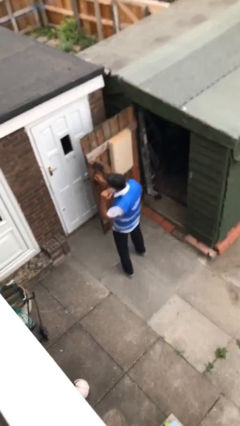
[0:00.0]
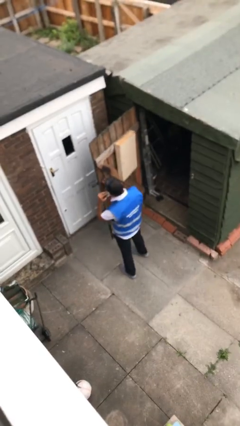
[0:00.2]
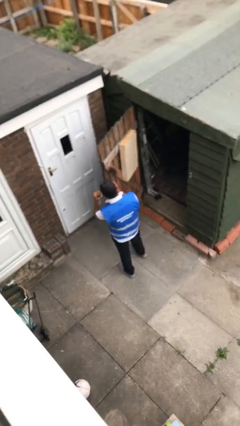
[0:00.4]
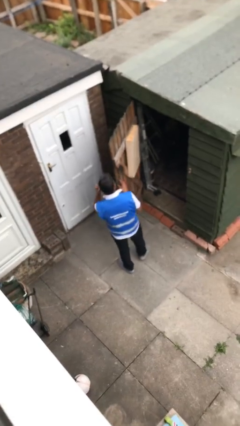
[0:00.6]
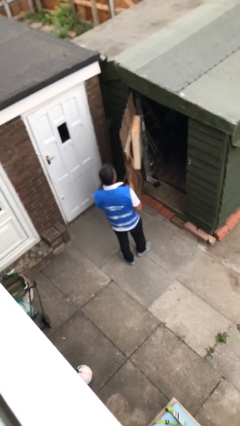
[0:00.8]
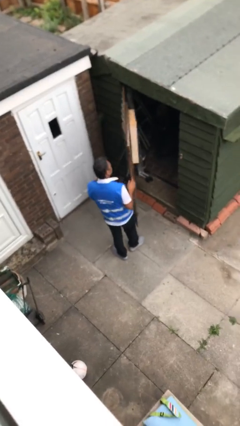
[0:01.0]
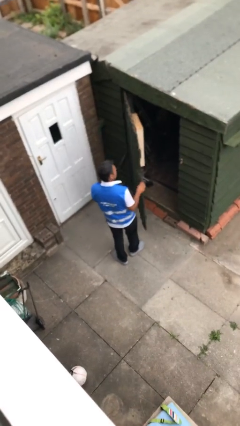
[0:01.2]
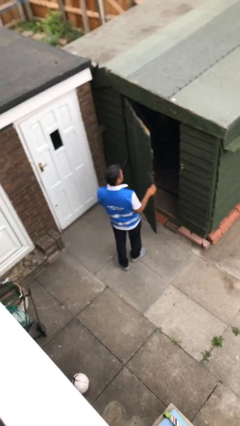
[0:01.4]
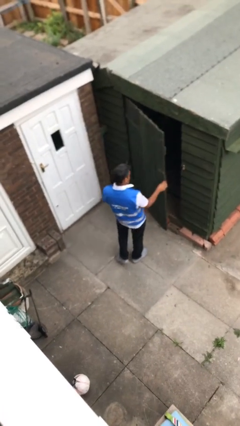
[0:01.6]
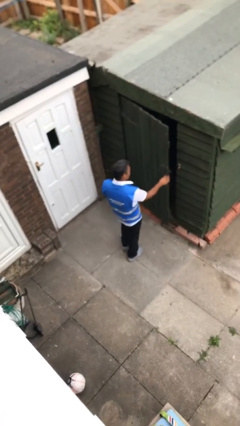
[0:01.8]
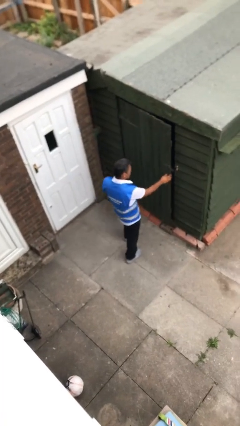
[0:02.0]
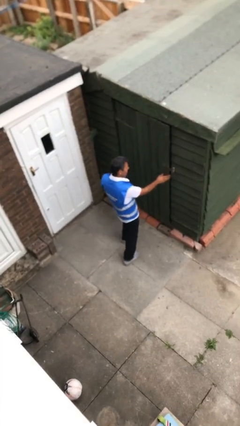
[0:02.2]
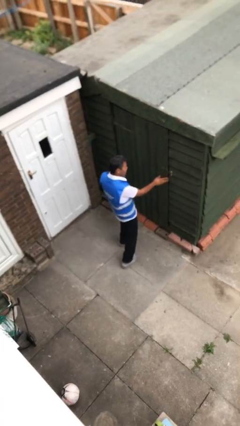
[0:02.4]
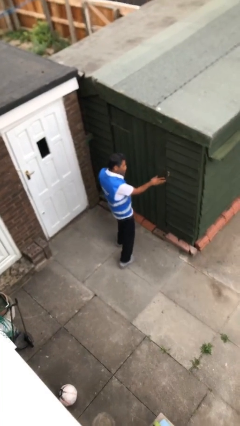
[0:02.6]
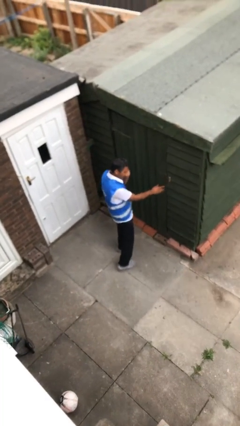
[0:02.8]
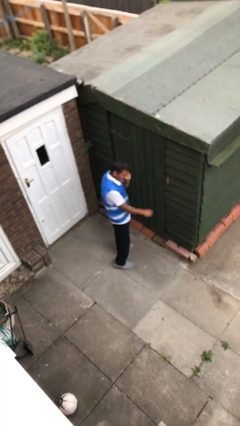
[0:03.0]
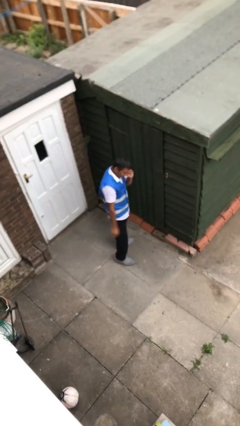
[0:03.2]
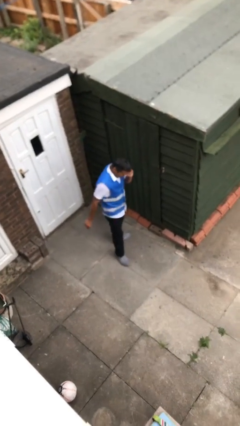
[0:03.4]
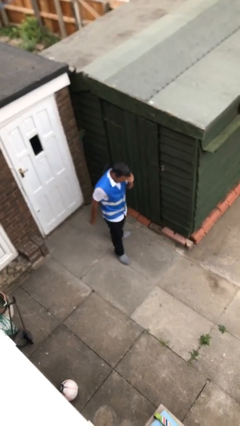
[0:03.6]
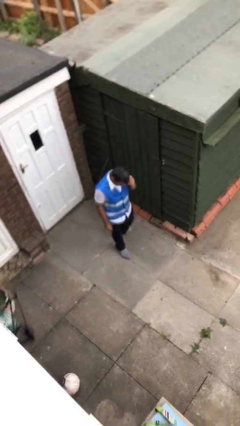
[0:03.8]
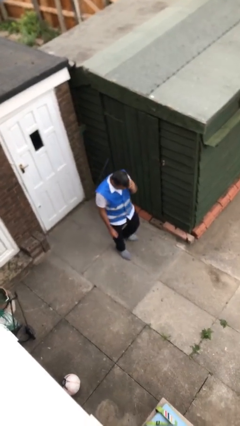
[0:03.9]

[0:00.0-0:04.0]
person closes facility door

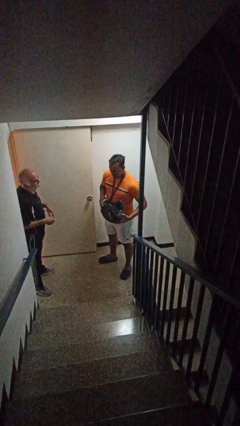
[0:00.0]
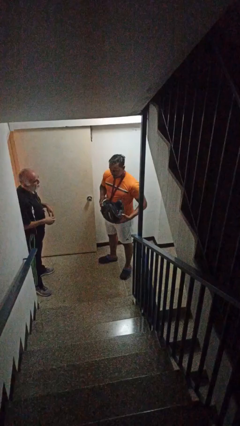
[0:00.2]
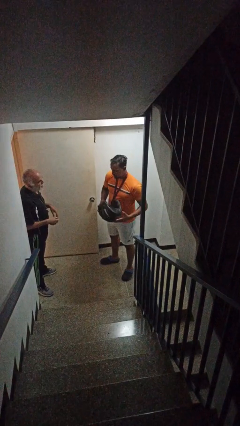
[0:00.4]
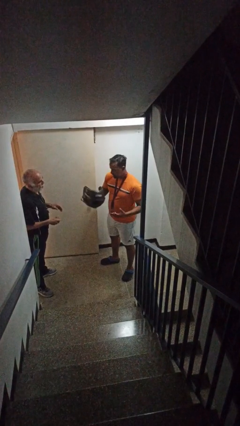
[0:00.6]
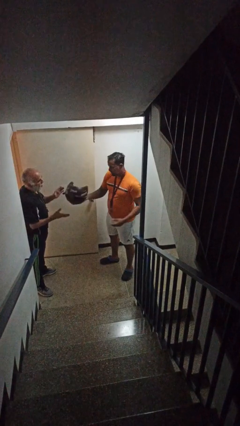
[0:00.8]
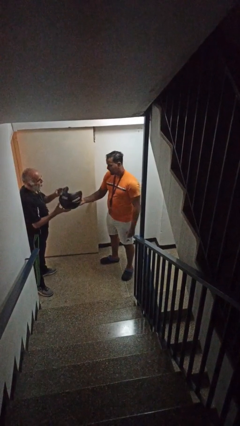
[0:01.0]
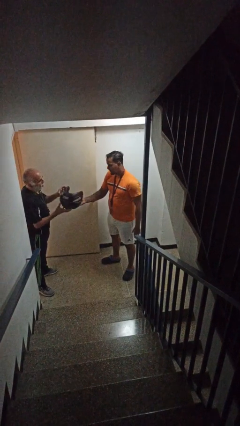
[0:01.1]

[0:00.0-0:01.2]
person transfers object to person

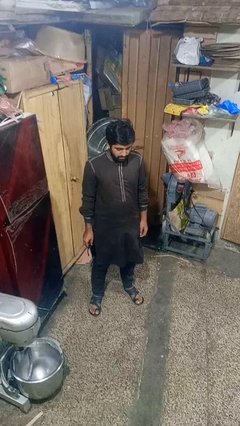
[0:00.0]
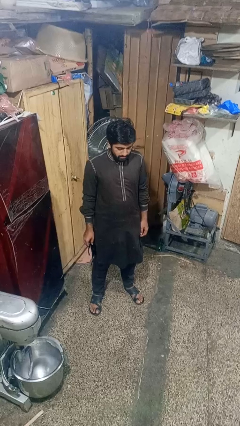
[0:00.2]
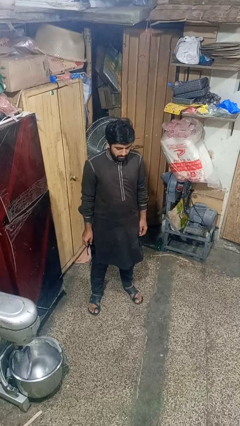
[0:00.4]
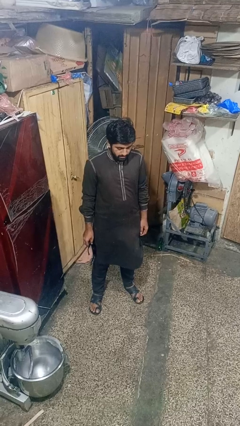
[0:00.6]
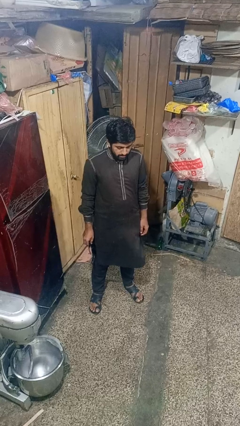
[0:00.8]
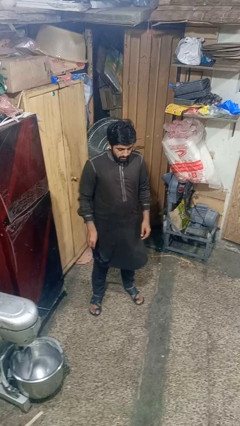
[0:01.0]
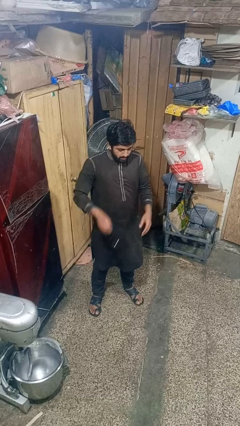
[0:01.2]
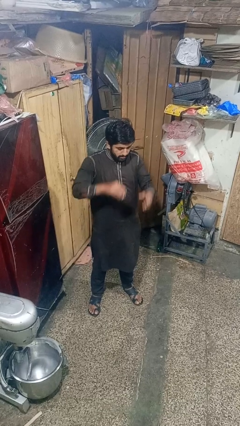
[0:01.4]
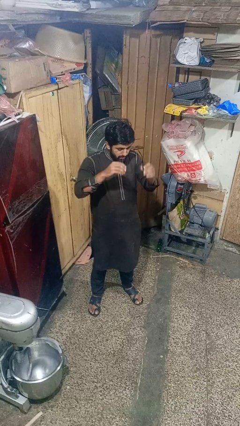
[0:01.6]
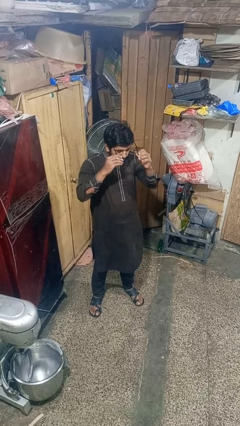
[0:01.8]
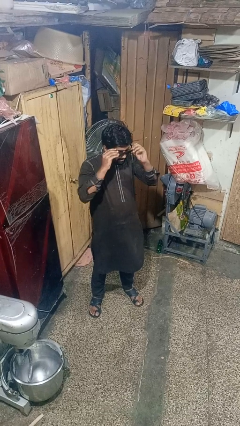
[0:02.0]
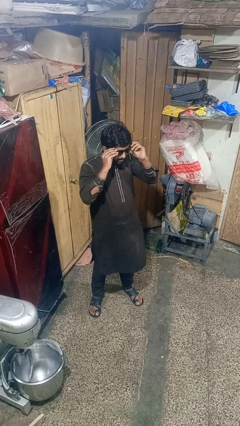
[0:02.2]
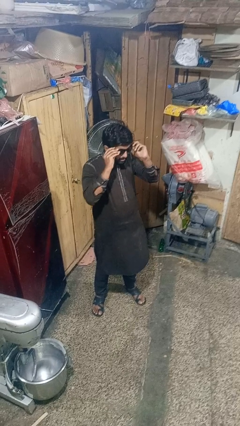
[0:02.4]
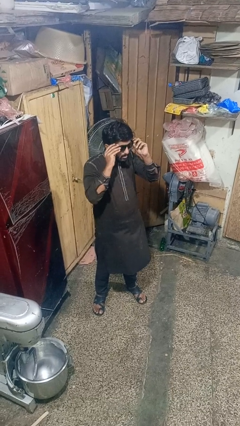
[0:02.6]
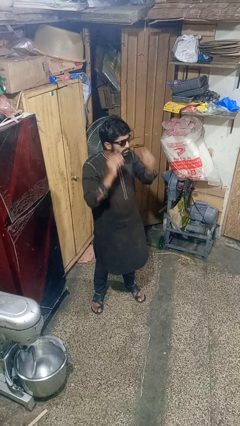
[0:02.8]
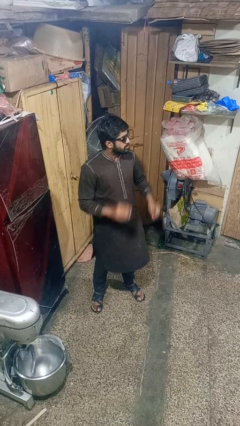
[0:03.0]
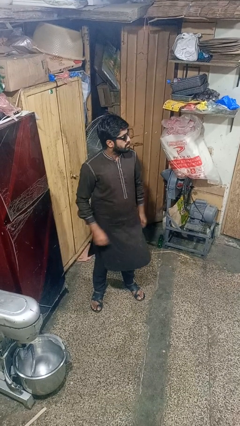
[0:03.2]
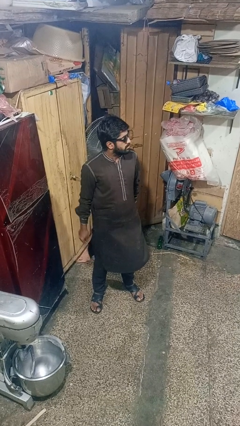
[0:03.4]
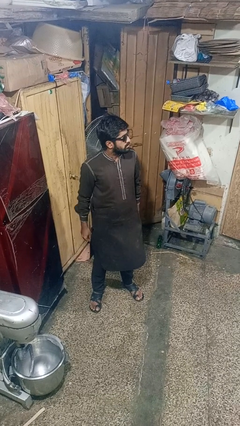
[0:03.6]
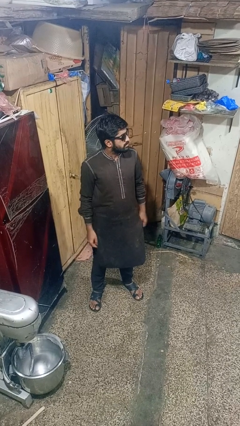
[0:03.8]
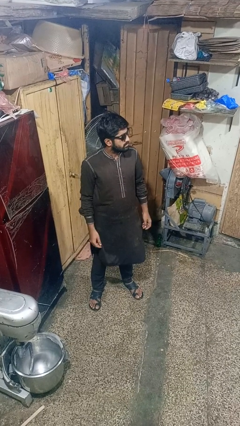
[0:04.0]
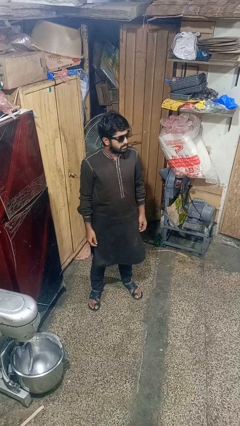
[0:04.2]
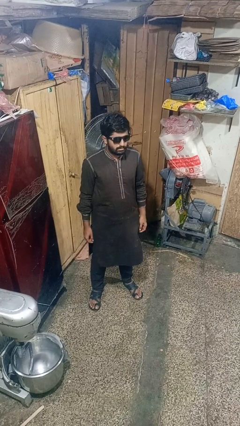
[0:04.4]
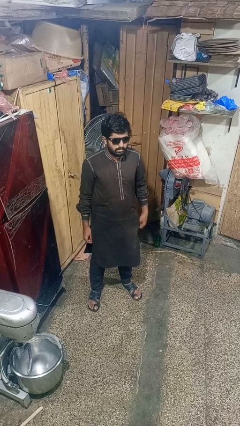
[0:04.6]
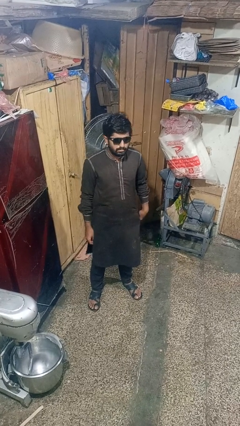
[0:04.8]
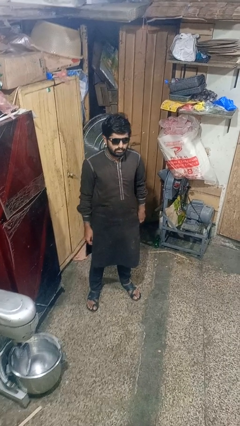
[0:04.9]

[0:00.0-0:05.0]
person puts on sunglasses

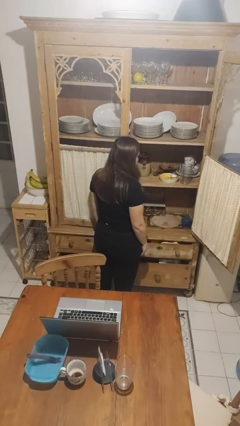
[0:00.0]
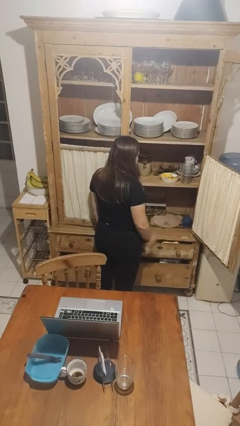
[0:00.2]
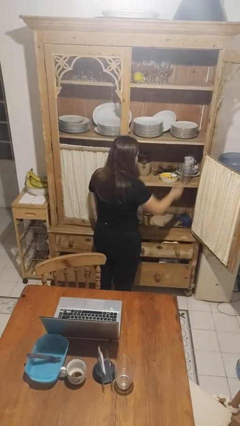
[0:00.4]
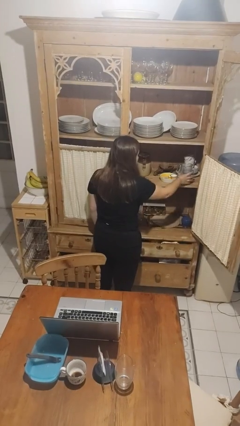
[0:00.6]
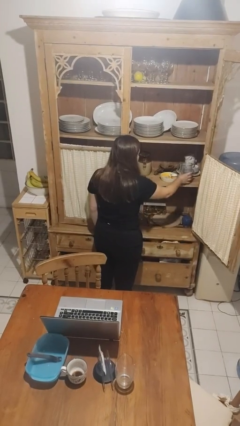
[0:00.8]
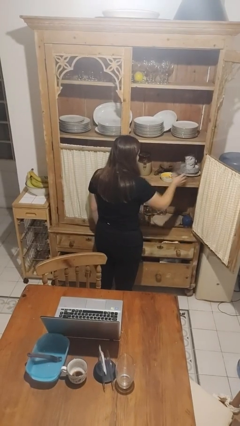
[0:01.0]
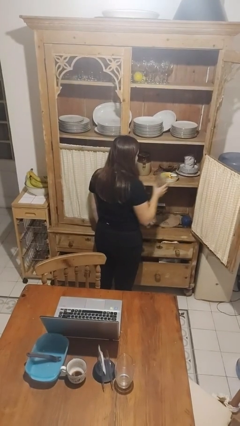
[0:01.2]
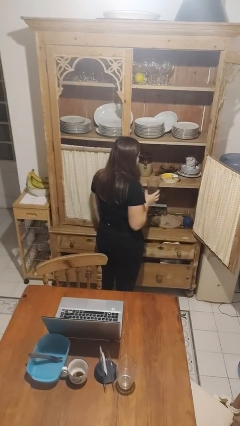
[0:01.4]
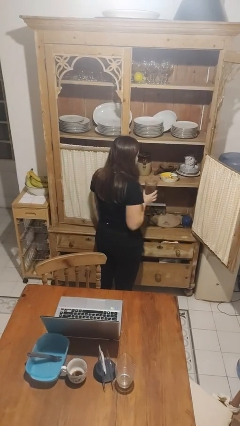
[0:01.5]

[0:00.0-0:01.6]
person takes object from cabinet

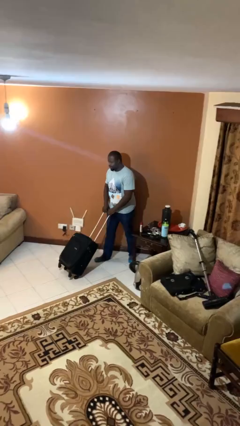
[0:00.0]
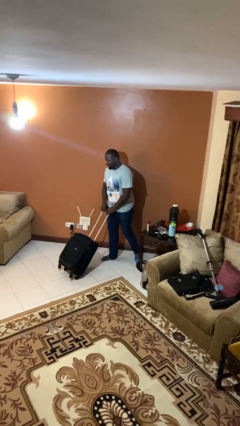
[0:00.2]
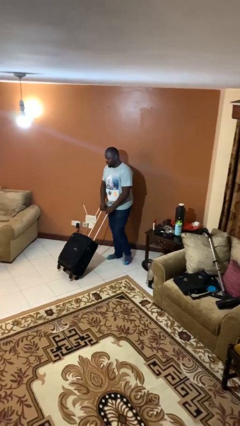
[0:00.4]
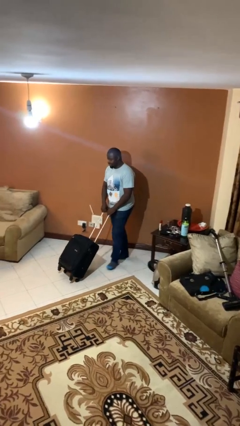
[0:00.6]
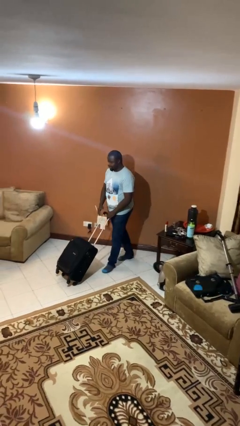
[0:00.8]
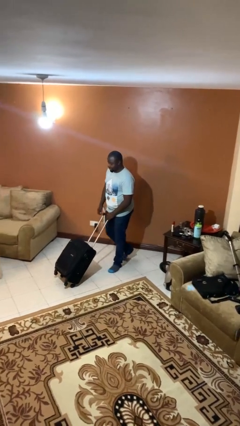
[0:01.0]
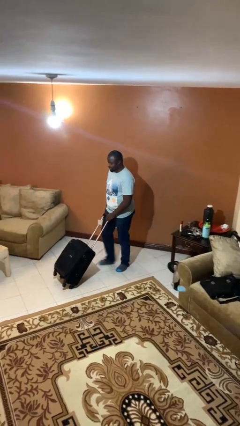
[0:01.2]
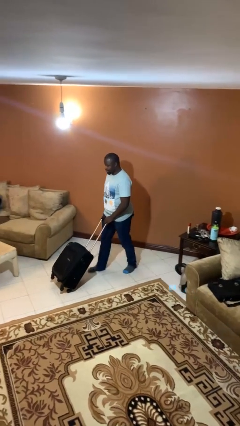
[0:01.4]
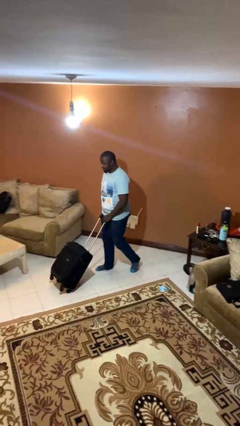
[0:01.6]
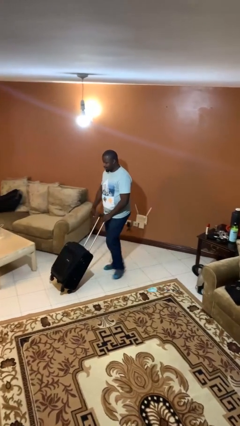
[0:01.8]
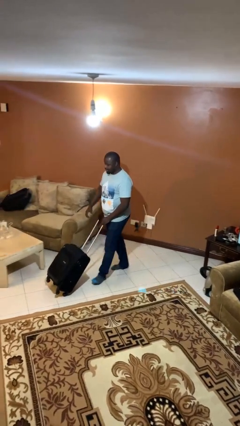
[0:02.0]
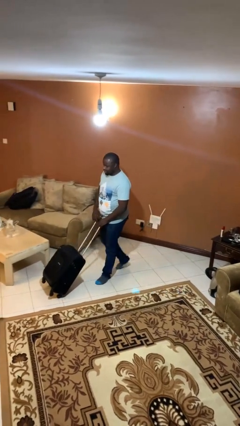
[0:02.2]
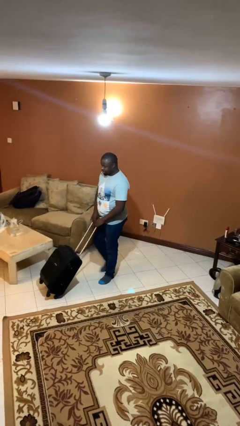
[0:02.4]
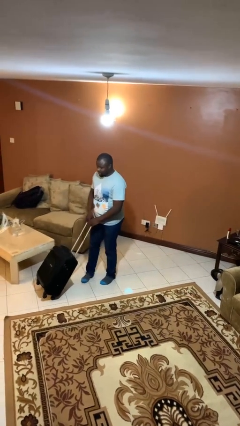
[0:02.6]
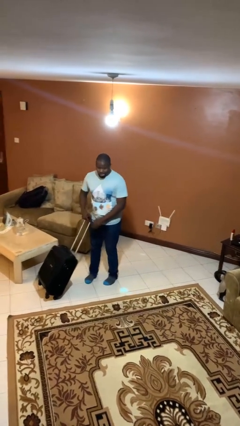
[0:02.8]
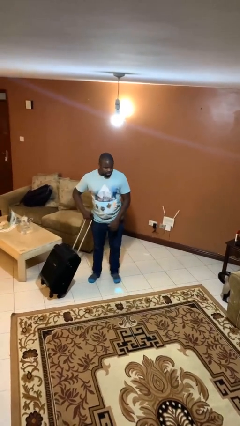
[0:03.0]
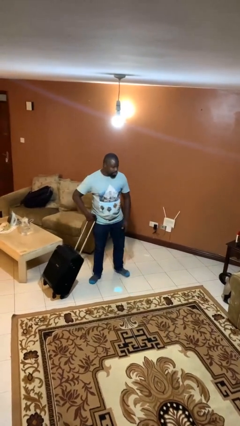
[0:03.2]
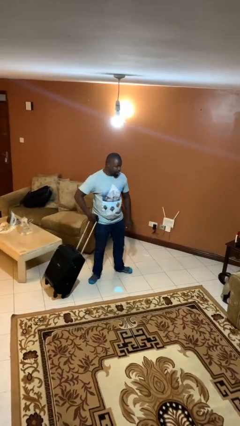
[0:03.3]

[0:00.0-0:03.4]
person pulls wheeled cart

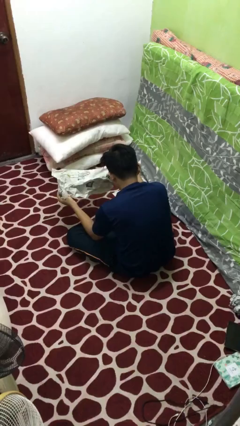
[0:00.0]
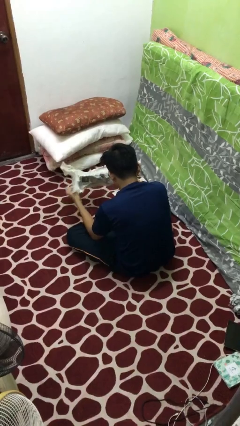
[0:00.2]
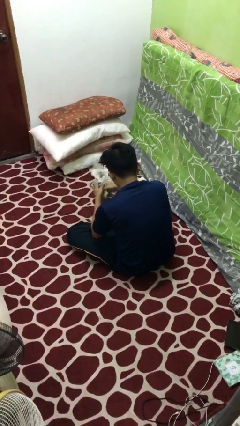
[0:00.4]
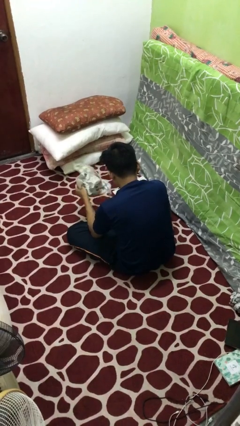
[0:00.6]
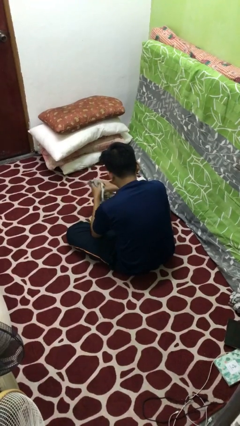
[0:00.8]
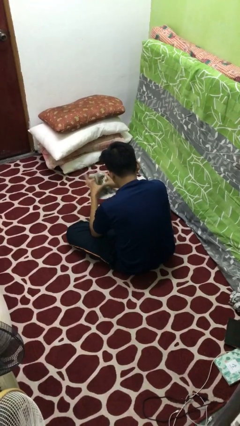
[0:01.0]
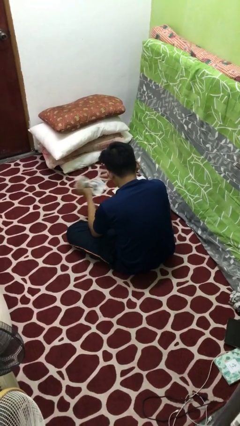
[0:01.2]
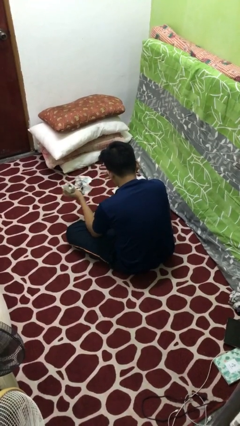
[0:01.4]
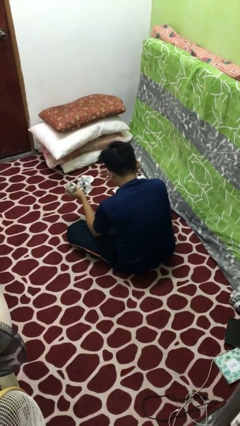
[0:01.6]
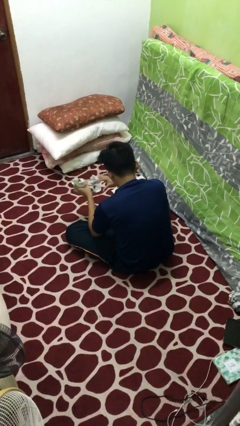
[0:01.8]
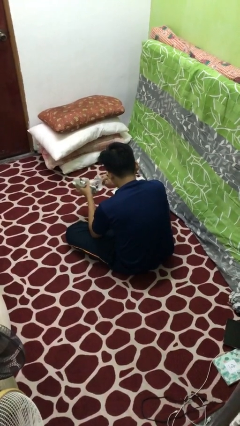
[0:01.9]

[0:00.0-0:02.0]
person crumples paper

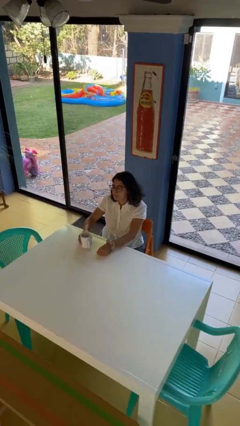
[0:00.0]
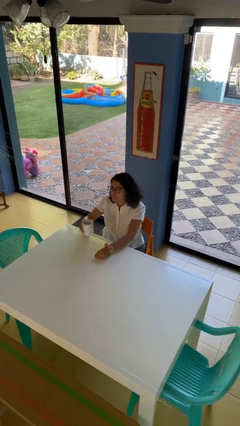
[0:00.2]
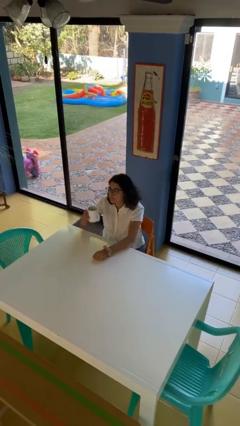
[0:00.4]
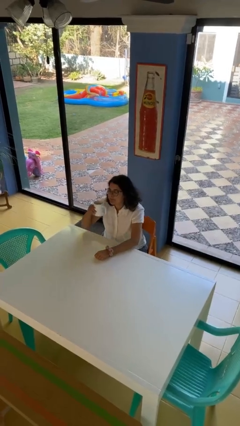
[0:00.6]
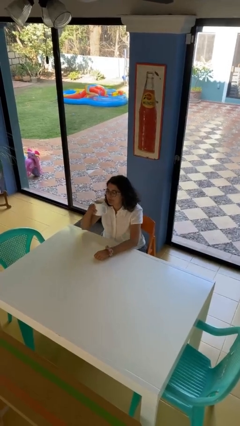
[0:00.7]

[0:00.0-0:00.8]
person picks up object from table
